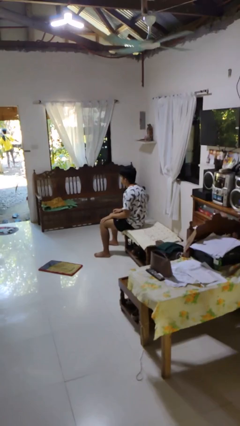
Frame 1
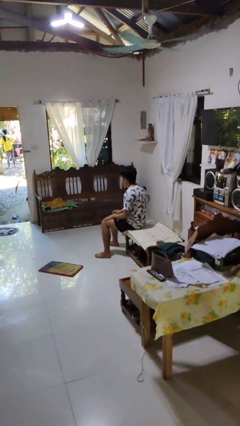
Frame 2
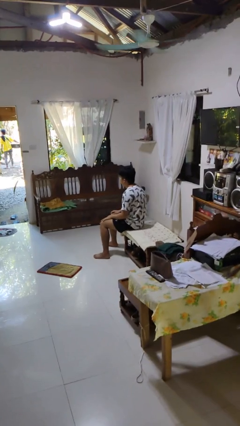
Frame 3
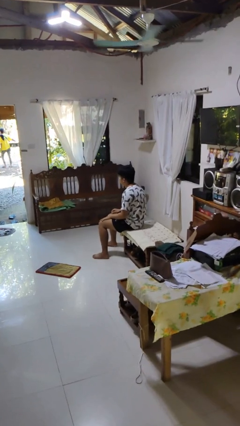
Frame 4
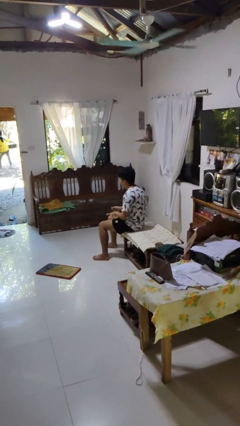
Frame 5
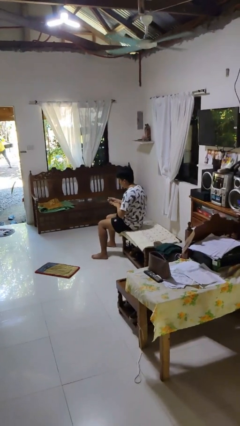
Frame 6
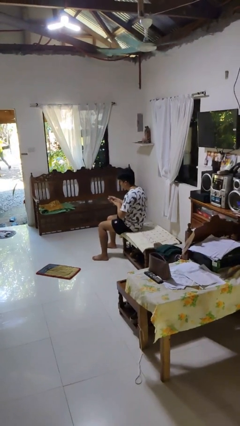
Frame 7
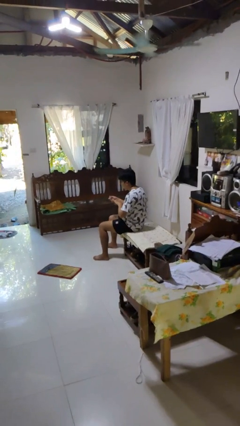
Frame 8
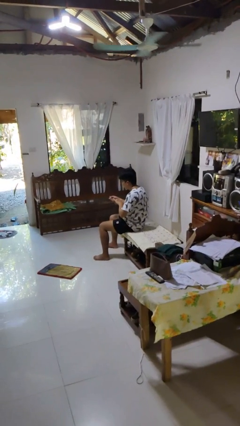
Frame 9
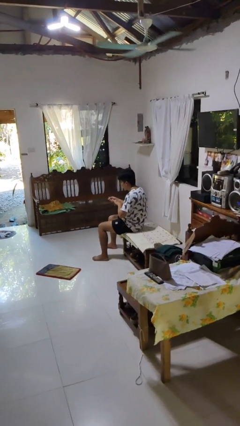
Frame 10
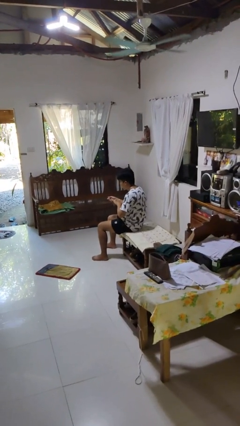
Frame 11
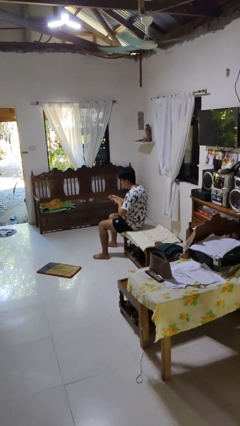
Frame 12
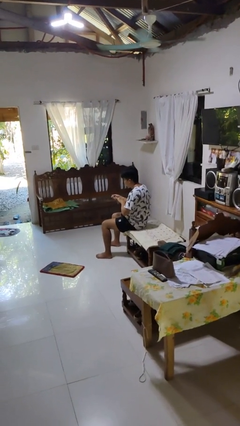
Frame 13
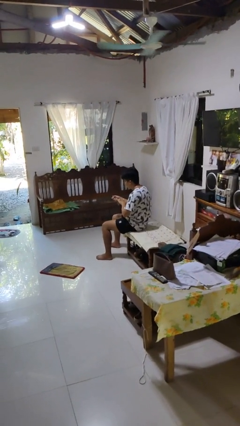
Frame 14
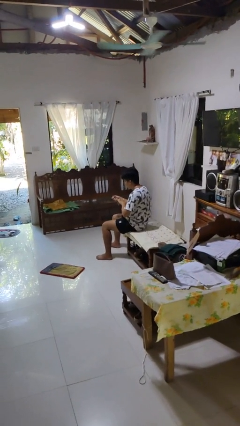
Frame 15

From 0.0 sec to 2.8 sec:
person clips fingernails

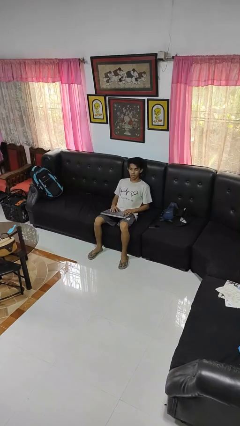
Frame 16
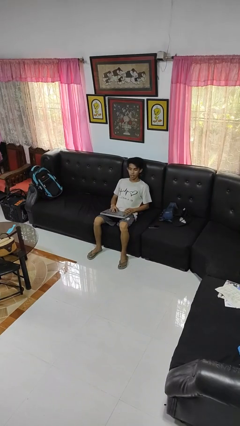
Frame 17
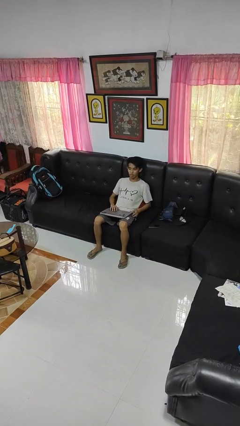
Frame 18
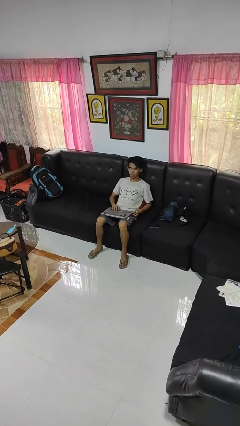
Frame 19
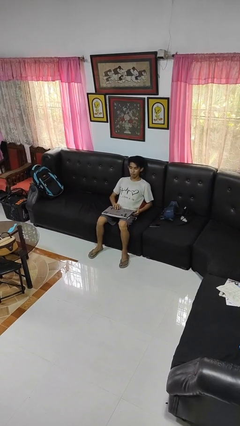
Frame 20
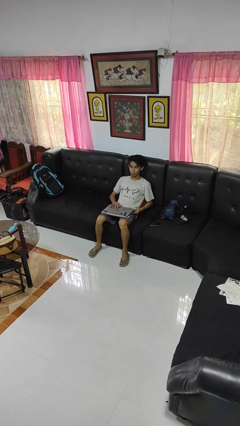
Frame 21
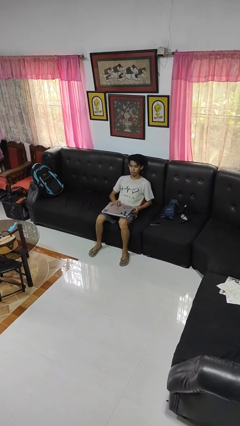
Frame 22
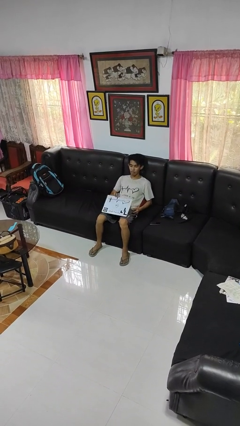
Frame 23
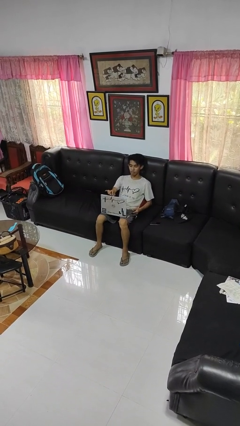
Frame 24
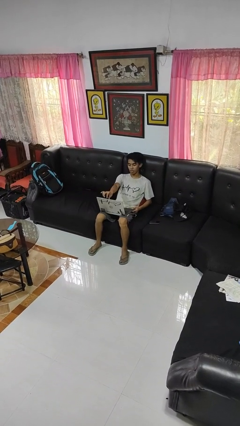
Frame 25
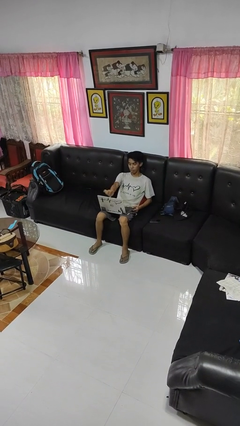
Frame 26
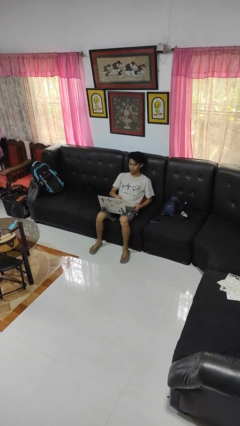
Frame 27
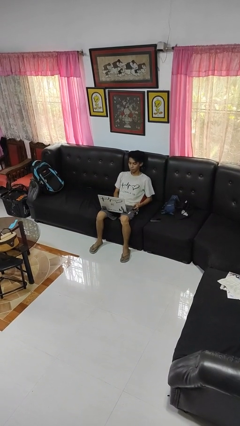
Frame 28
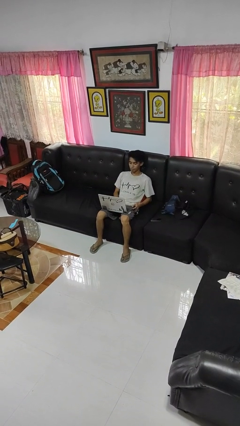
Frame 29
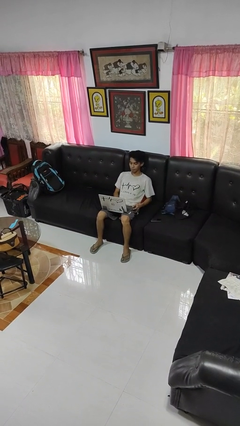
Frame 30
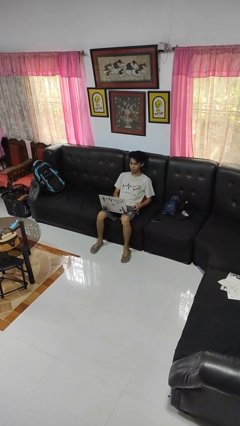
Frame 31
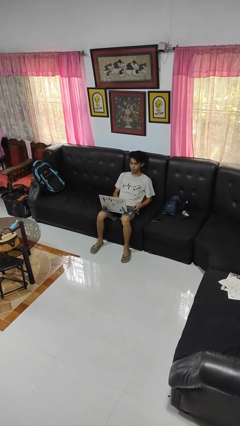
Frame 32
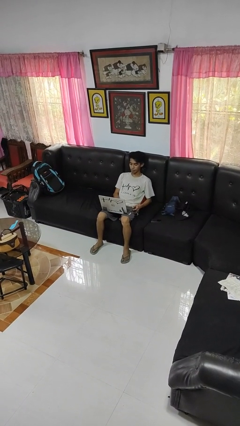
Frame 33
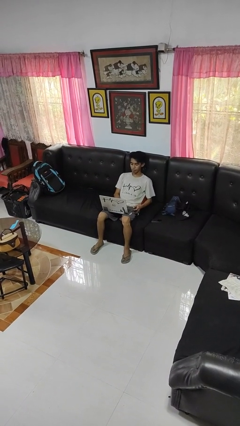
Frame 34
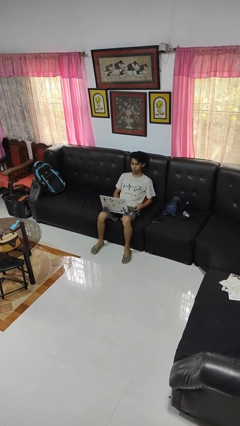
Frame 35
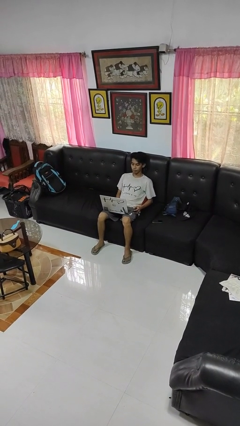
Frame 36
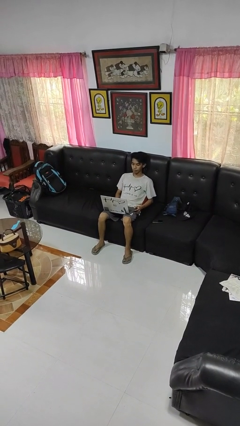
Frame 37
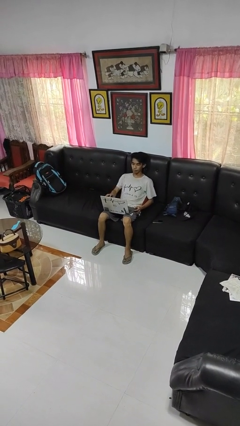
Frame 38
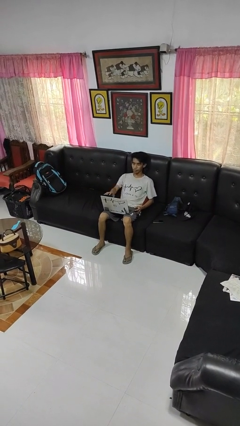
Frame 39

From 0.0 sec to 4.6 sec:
person opens laptop

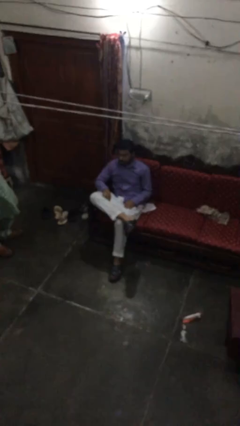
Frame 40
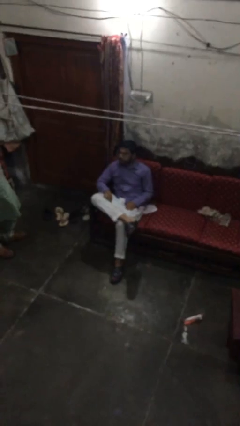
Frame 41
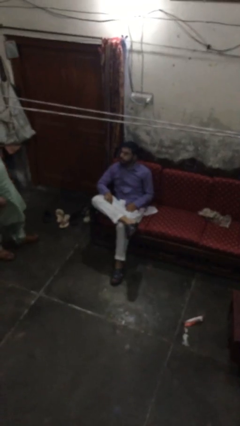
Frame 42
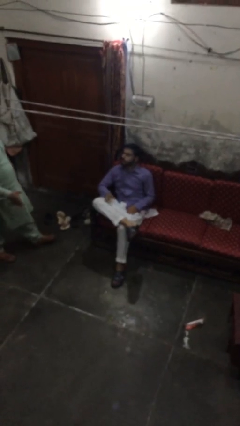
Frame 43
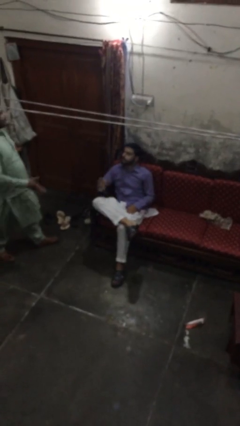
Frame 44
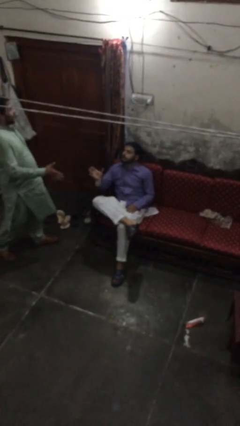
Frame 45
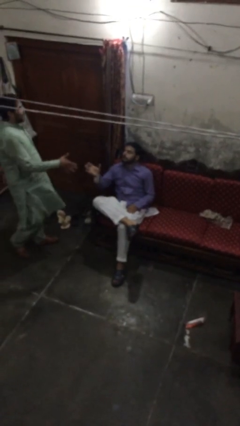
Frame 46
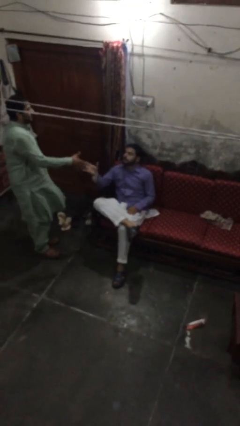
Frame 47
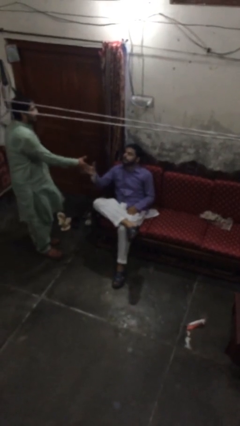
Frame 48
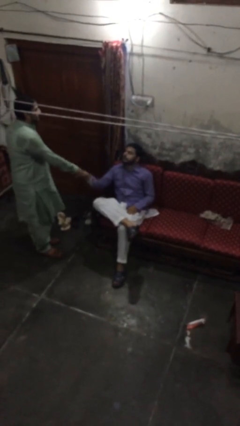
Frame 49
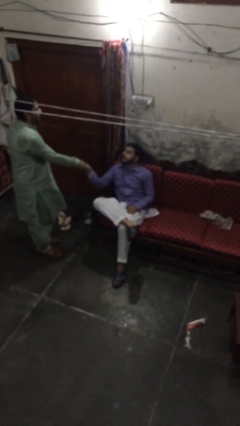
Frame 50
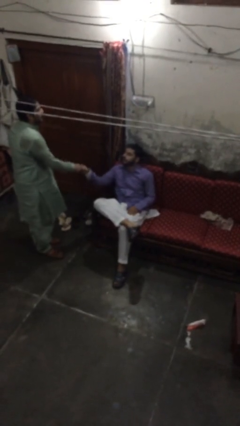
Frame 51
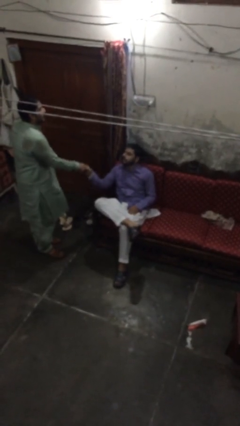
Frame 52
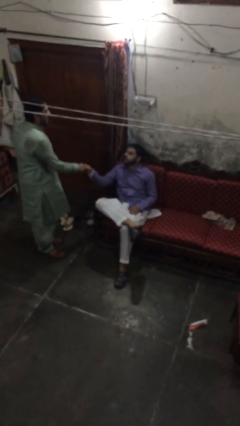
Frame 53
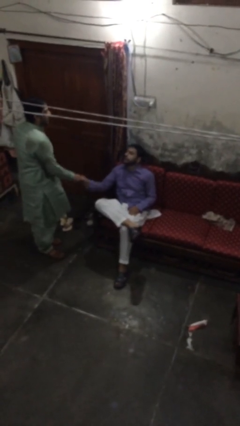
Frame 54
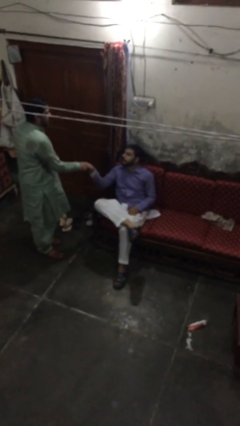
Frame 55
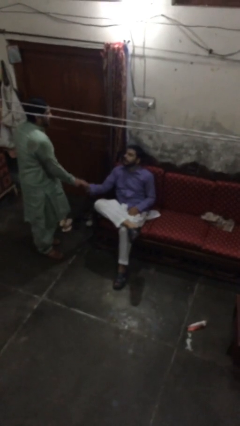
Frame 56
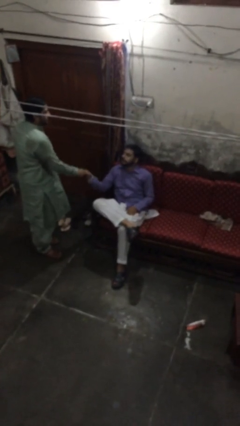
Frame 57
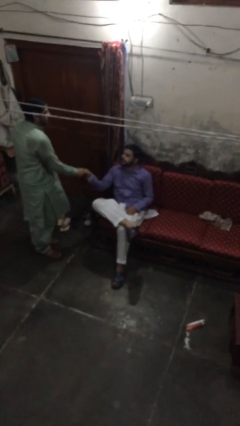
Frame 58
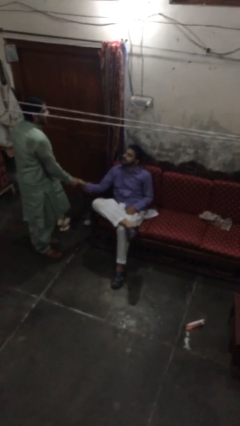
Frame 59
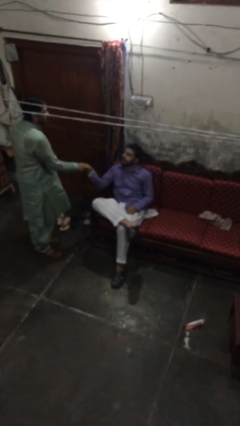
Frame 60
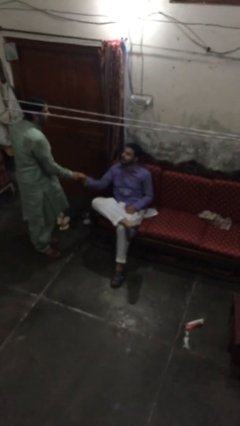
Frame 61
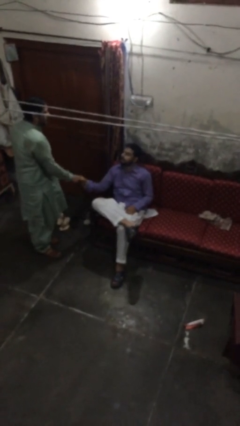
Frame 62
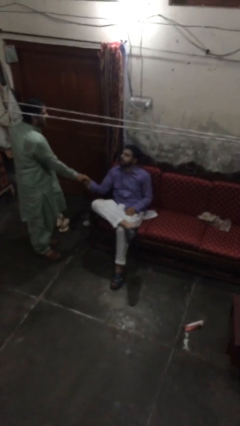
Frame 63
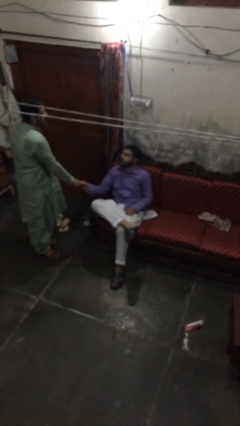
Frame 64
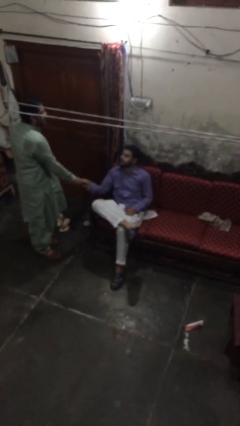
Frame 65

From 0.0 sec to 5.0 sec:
person shakes hand

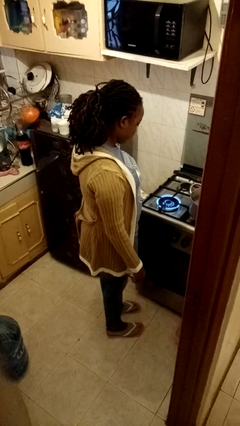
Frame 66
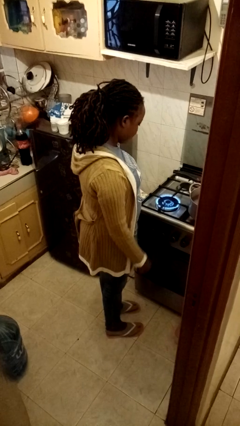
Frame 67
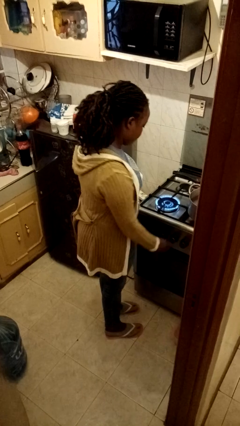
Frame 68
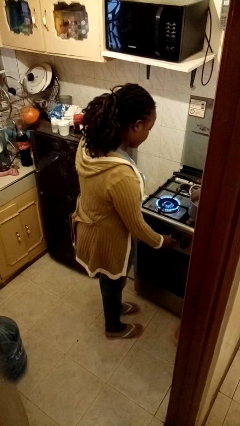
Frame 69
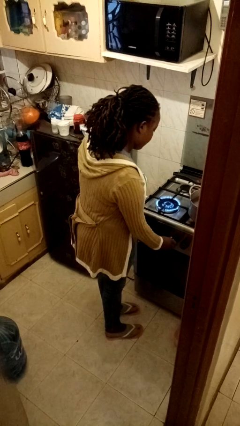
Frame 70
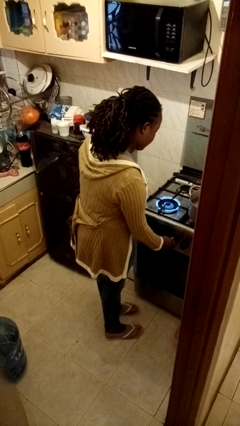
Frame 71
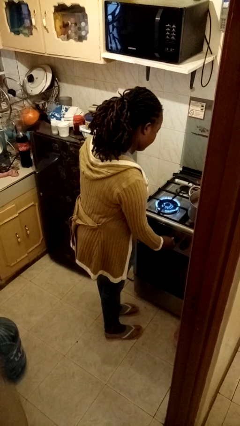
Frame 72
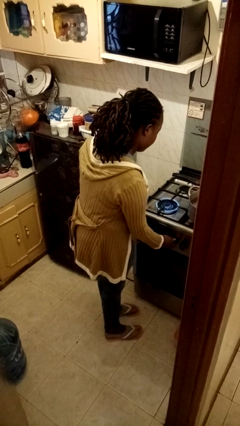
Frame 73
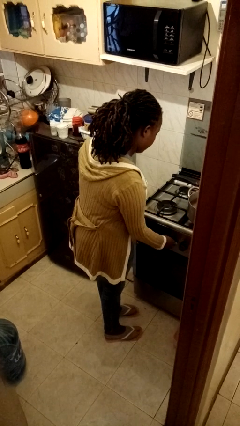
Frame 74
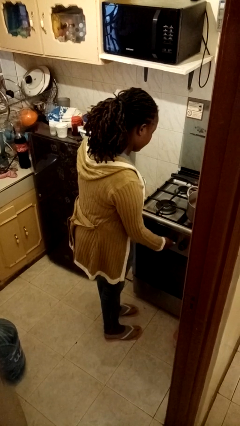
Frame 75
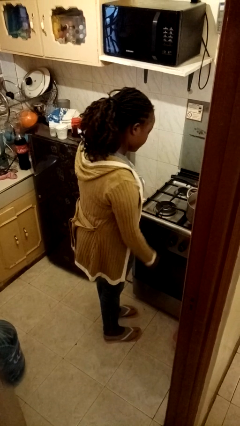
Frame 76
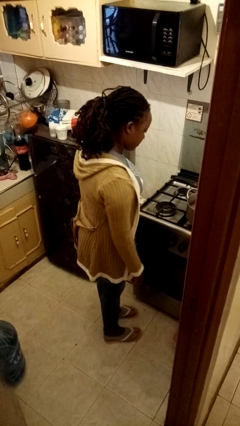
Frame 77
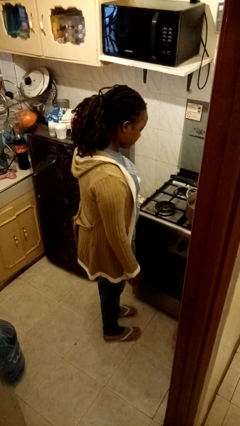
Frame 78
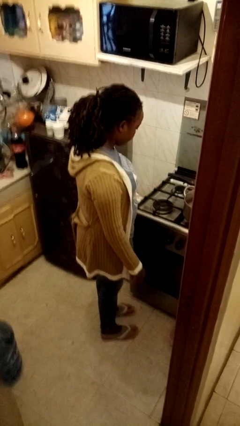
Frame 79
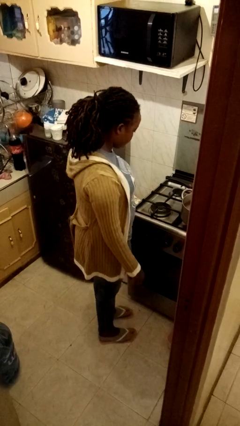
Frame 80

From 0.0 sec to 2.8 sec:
person turns off stovetop

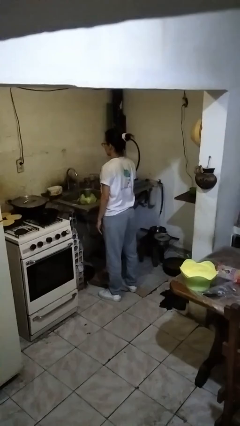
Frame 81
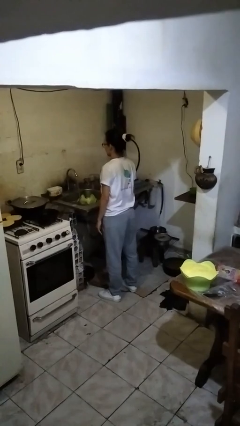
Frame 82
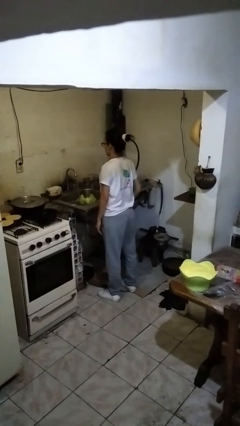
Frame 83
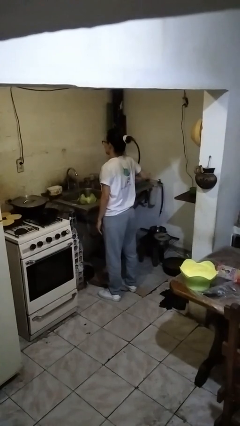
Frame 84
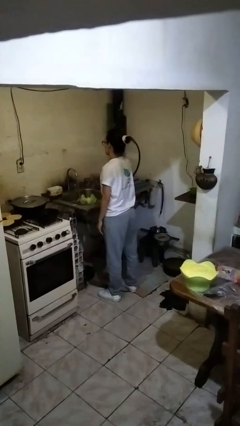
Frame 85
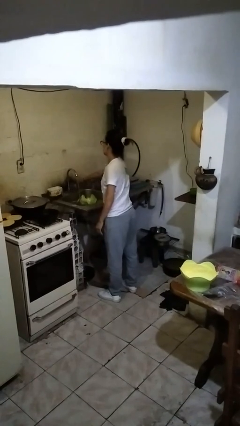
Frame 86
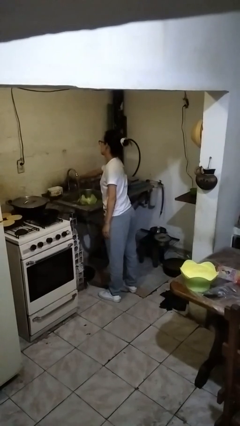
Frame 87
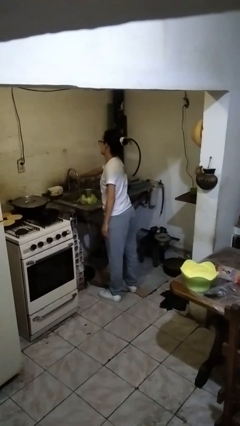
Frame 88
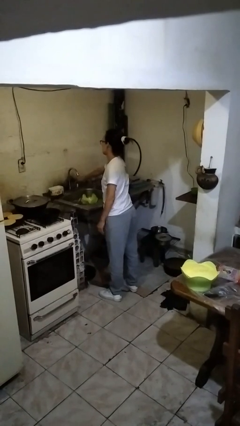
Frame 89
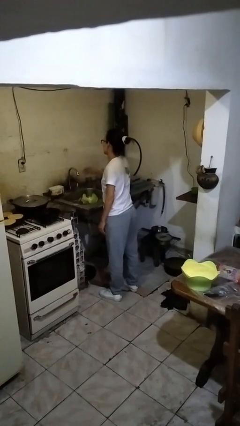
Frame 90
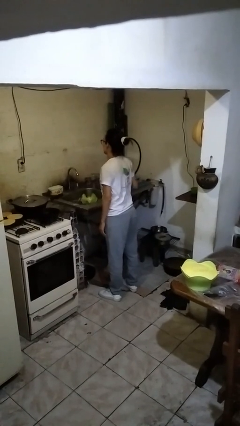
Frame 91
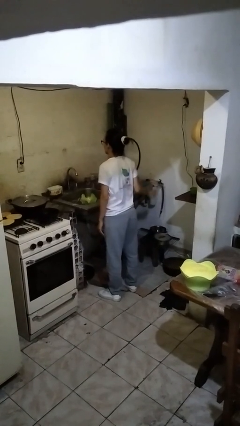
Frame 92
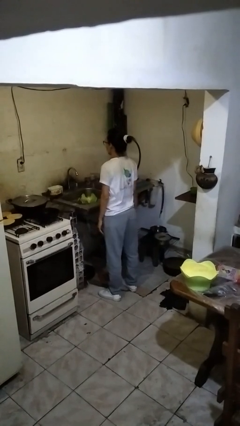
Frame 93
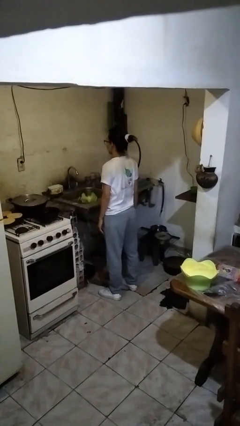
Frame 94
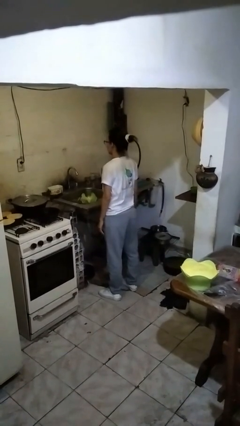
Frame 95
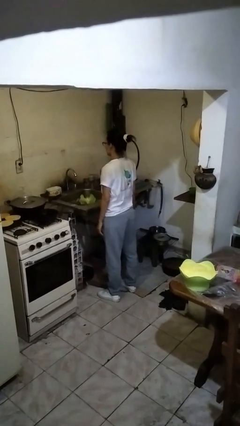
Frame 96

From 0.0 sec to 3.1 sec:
person turns off faucet
